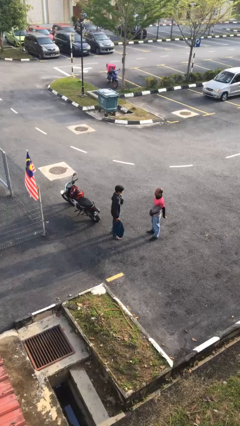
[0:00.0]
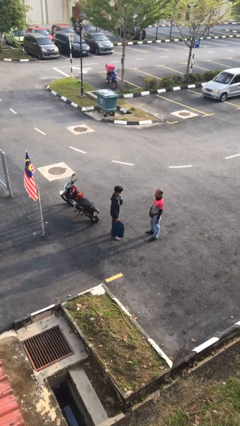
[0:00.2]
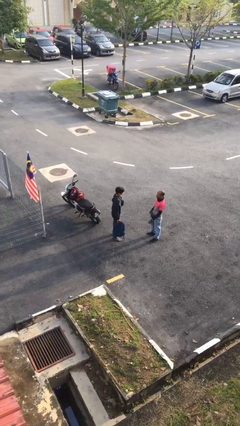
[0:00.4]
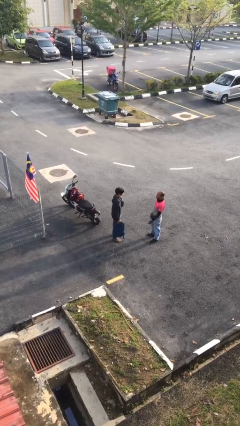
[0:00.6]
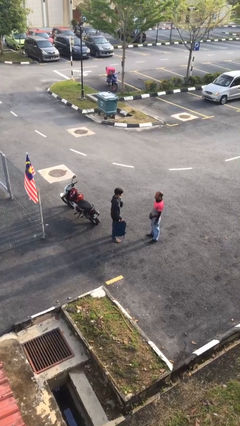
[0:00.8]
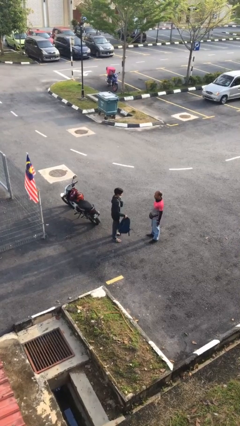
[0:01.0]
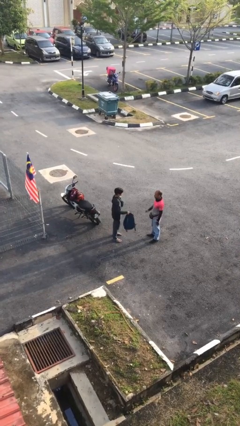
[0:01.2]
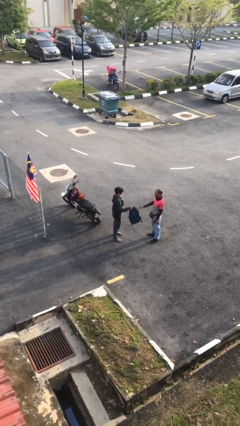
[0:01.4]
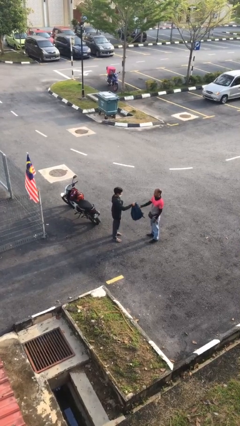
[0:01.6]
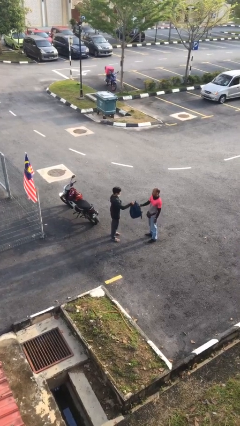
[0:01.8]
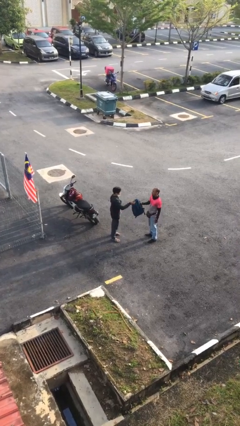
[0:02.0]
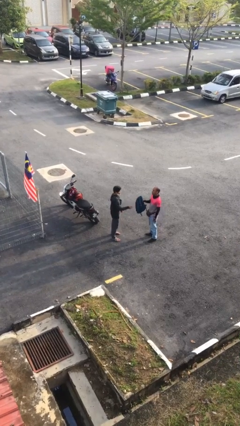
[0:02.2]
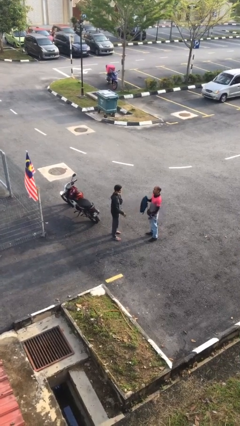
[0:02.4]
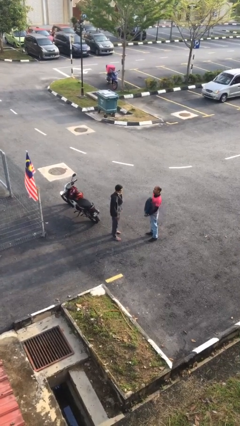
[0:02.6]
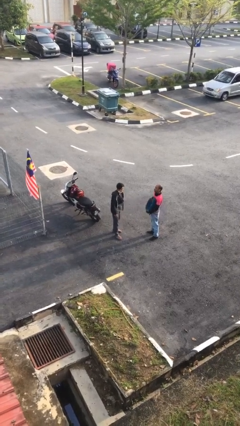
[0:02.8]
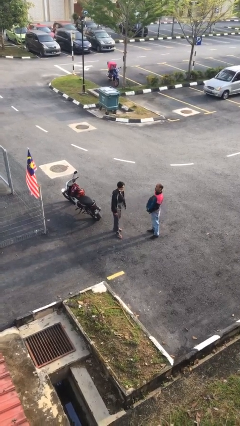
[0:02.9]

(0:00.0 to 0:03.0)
person transfers object to person

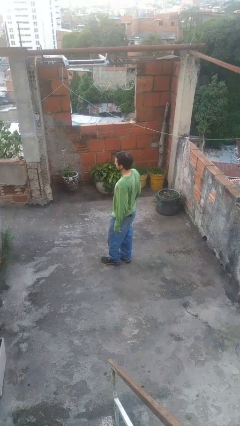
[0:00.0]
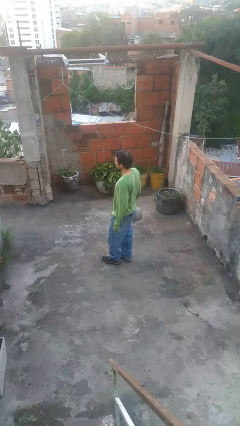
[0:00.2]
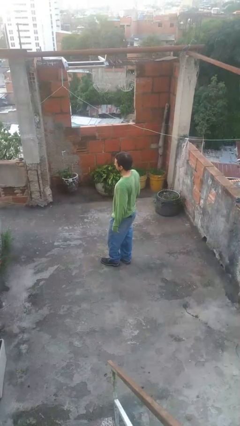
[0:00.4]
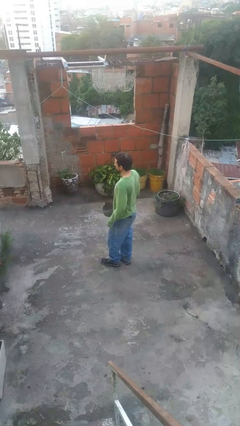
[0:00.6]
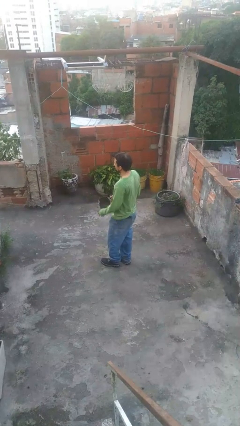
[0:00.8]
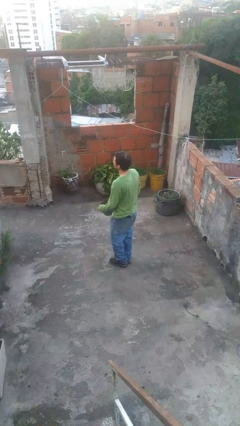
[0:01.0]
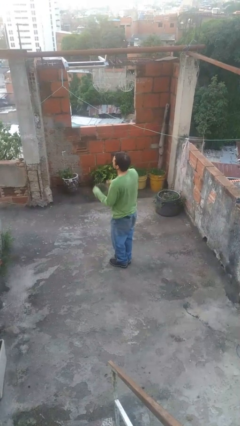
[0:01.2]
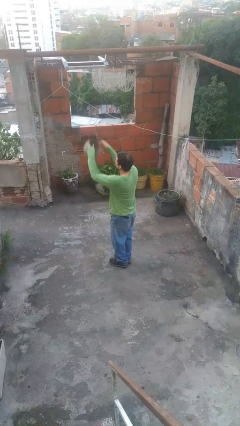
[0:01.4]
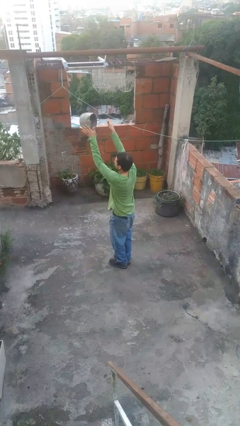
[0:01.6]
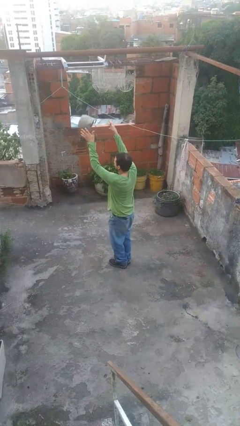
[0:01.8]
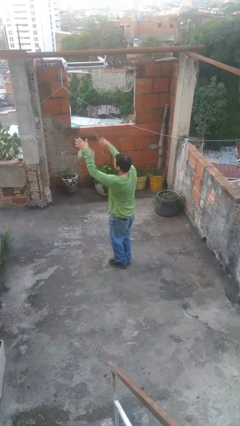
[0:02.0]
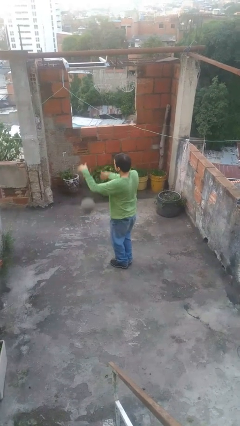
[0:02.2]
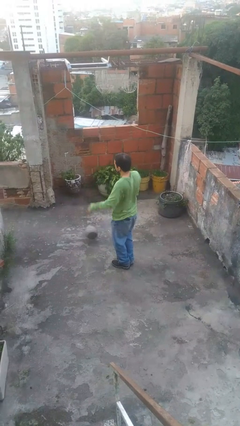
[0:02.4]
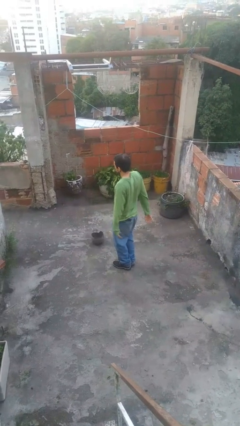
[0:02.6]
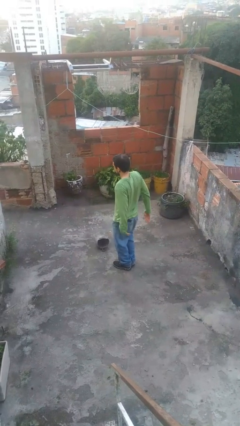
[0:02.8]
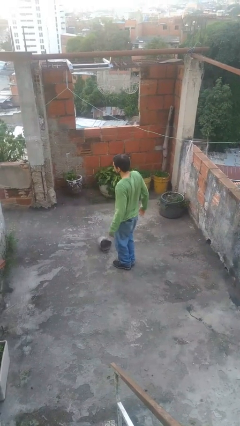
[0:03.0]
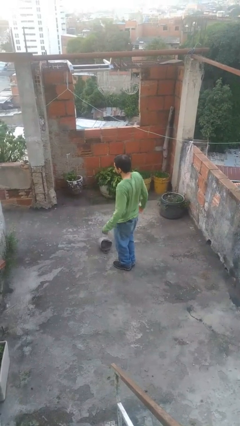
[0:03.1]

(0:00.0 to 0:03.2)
person throws object into air

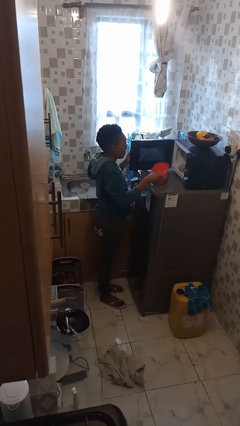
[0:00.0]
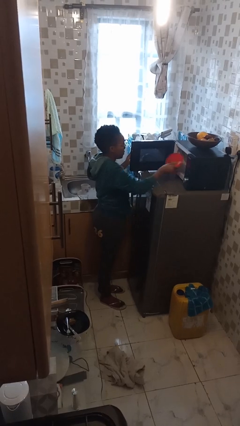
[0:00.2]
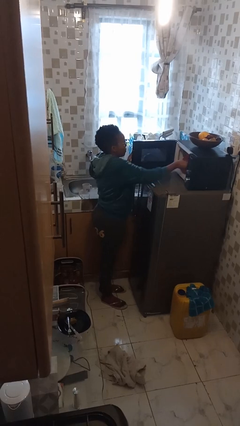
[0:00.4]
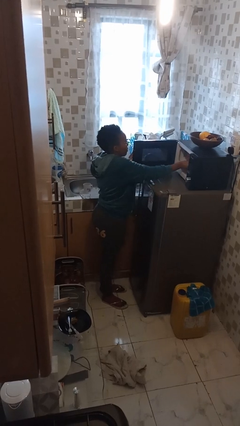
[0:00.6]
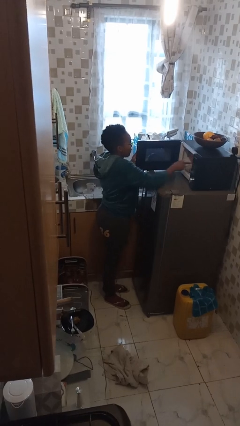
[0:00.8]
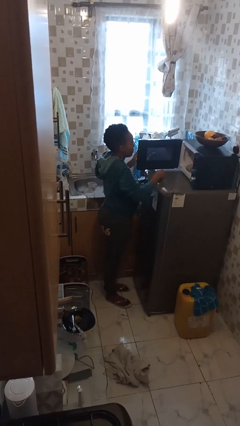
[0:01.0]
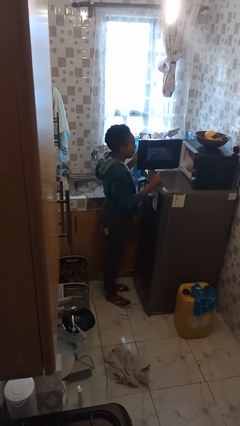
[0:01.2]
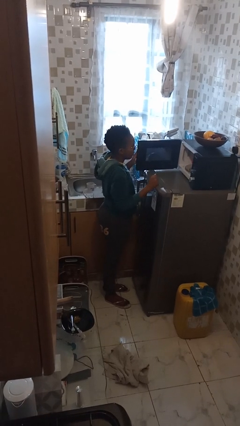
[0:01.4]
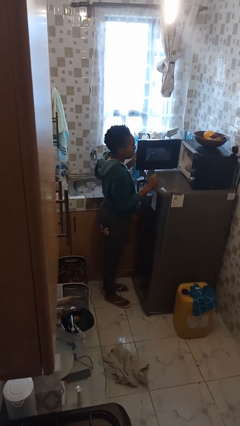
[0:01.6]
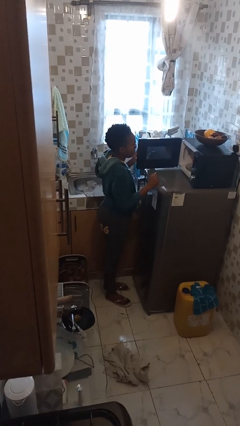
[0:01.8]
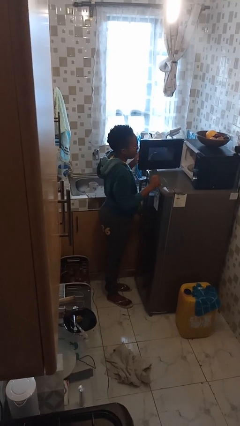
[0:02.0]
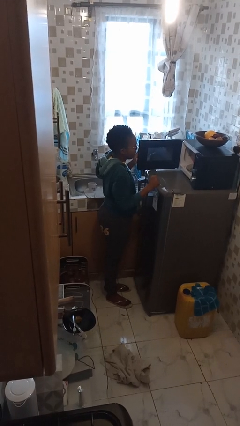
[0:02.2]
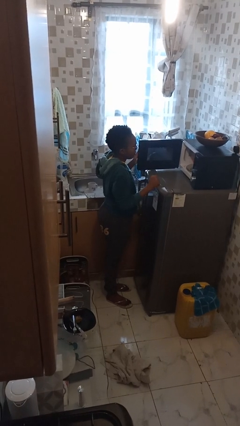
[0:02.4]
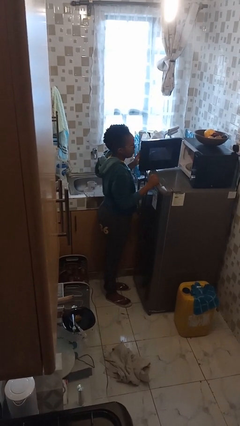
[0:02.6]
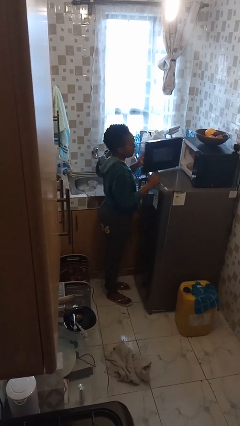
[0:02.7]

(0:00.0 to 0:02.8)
person puts object into microwave

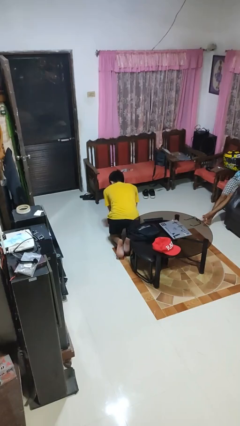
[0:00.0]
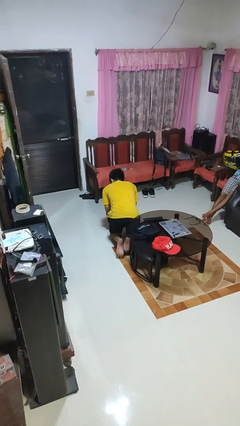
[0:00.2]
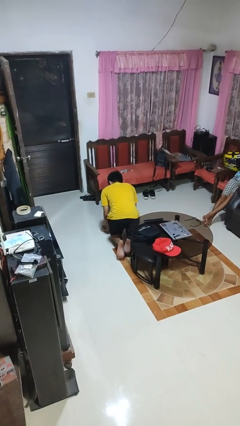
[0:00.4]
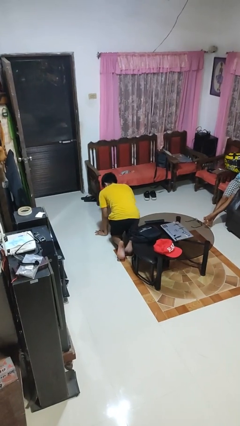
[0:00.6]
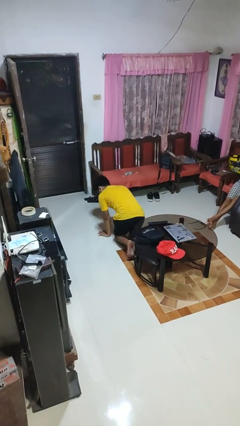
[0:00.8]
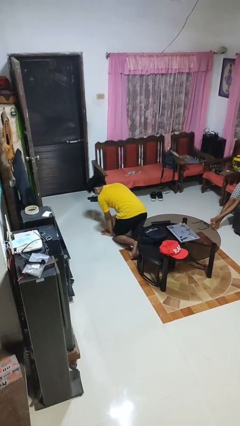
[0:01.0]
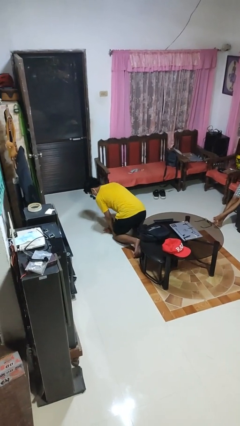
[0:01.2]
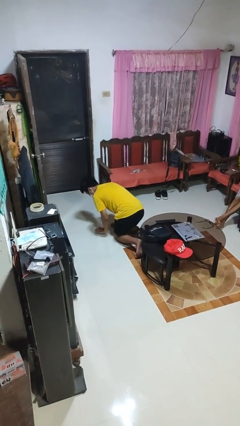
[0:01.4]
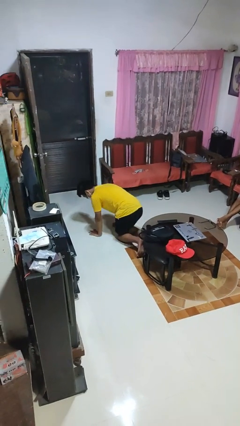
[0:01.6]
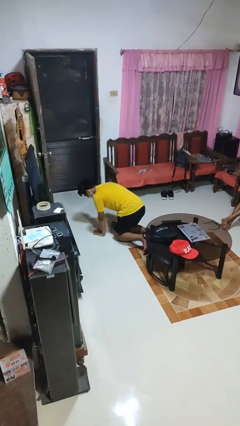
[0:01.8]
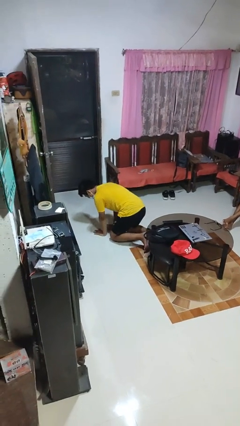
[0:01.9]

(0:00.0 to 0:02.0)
person crawls

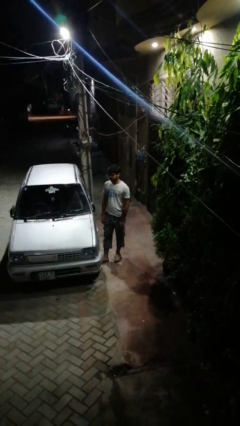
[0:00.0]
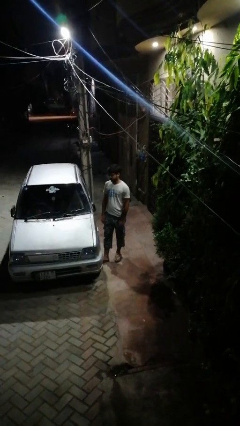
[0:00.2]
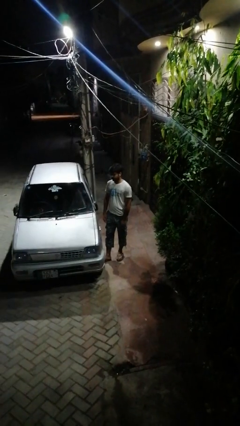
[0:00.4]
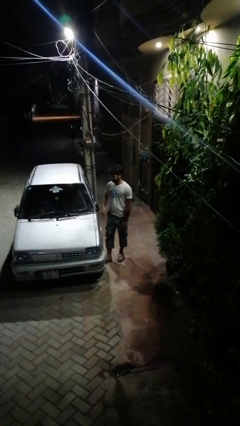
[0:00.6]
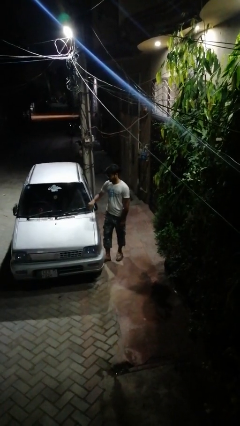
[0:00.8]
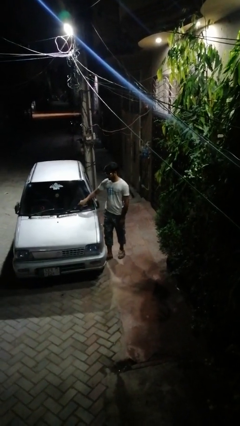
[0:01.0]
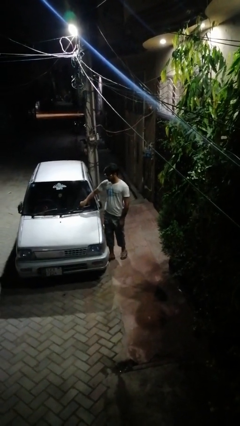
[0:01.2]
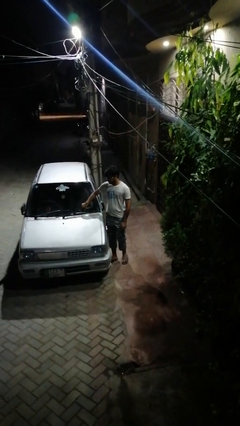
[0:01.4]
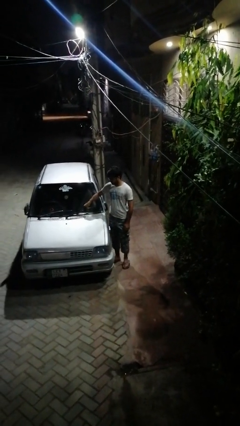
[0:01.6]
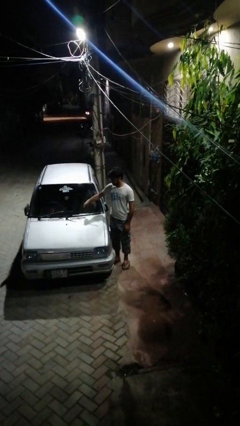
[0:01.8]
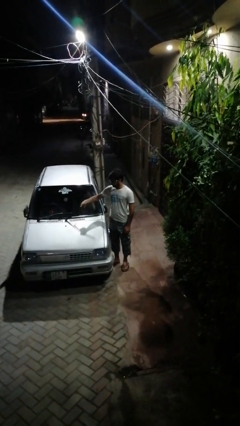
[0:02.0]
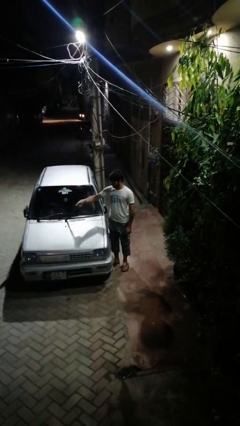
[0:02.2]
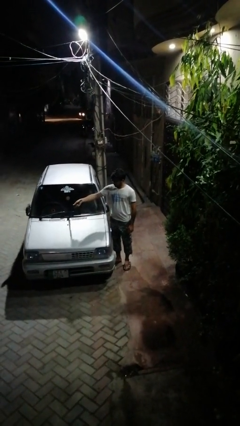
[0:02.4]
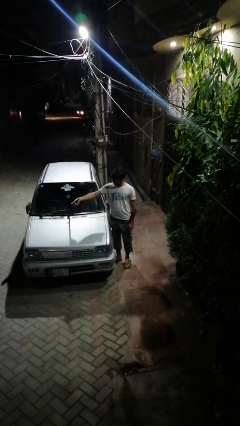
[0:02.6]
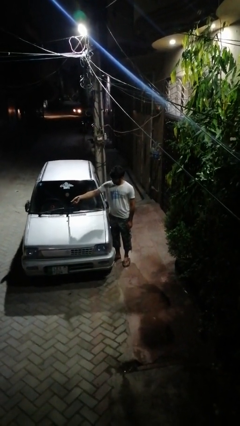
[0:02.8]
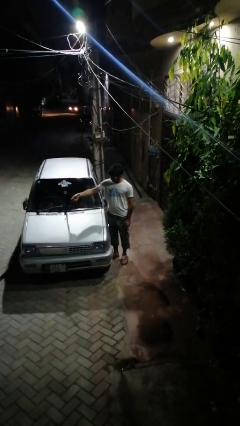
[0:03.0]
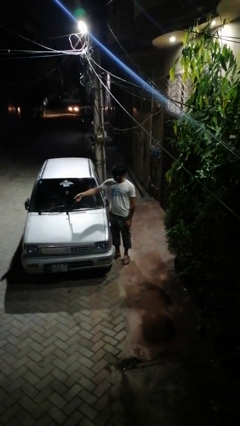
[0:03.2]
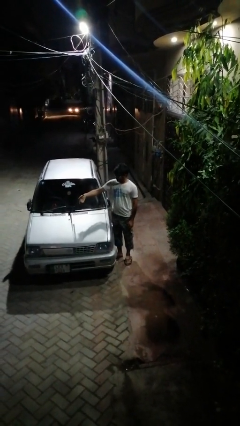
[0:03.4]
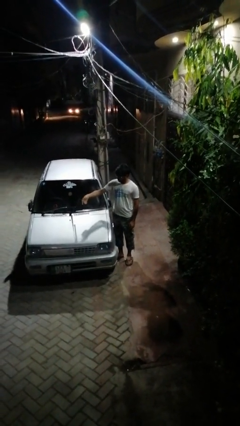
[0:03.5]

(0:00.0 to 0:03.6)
person flips up car wipers

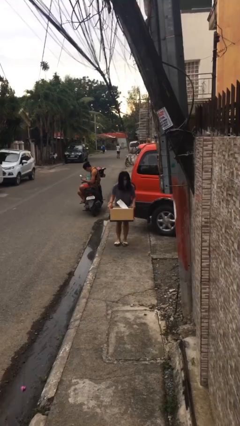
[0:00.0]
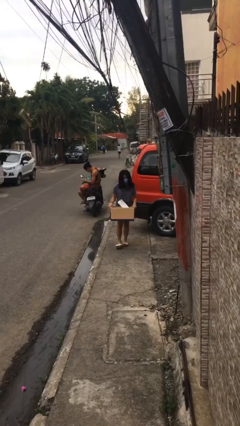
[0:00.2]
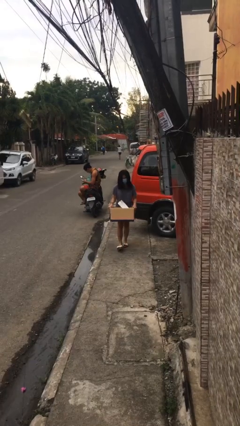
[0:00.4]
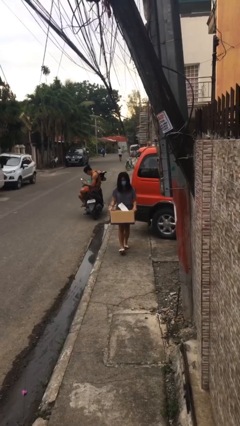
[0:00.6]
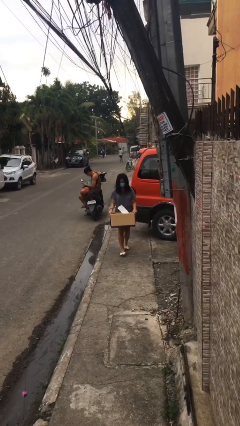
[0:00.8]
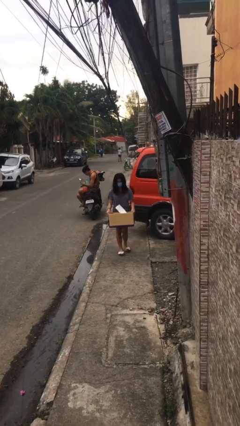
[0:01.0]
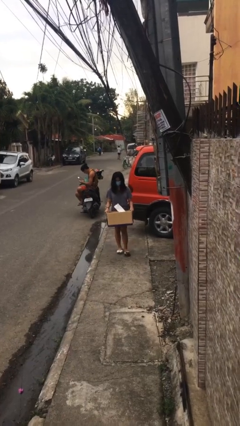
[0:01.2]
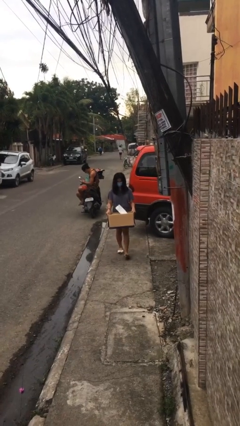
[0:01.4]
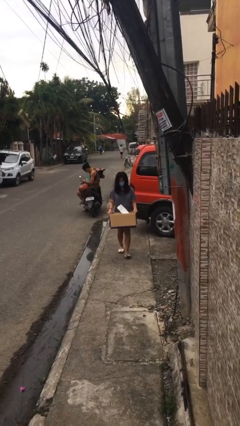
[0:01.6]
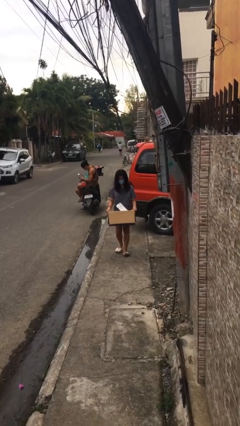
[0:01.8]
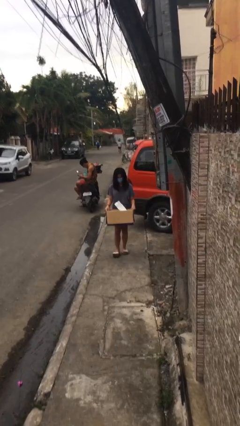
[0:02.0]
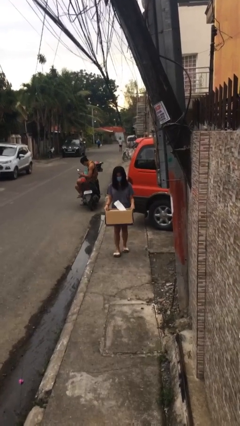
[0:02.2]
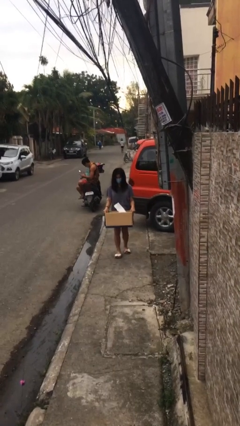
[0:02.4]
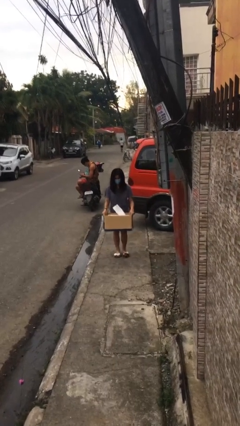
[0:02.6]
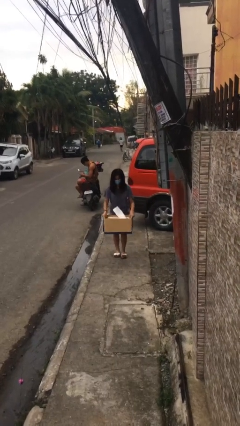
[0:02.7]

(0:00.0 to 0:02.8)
person carries heavy object
